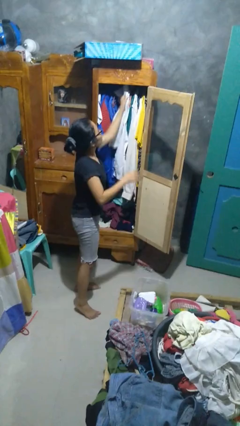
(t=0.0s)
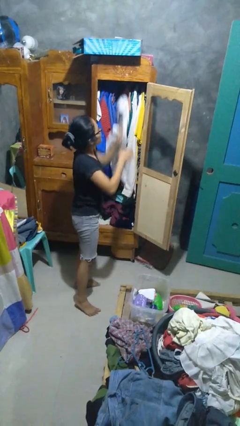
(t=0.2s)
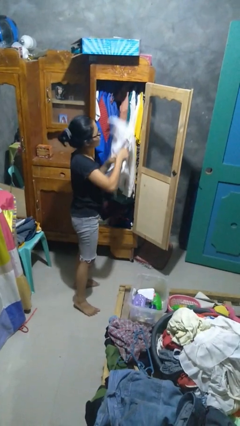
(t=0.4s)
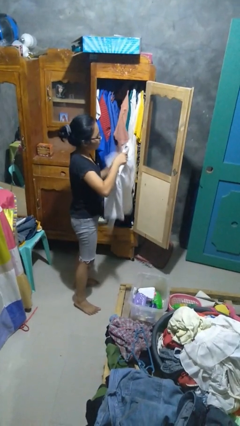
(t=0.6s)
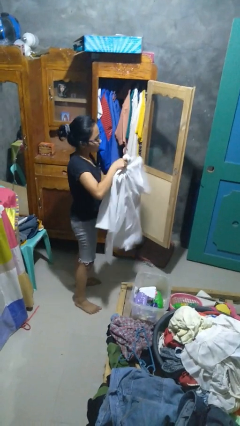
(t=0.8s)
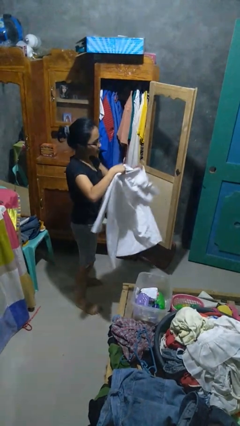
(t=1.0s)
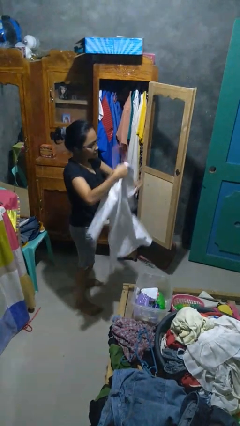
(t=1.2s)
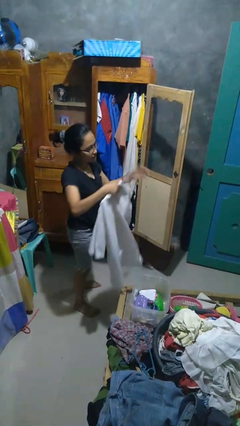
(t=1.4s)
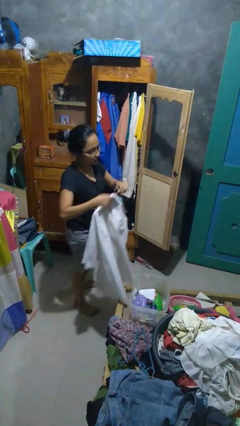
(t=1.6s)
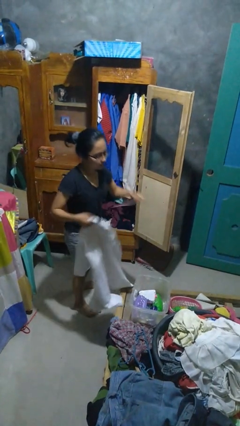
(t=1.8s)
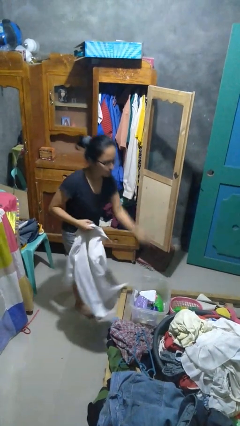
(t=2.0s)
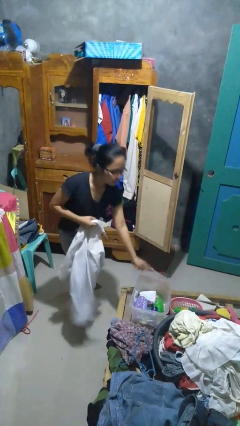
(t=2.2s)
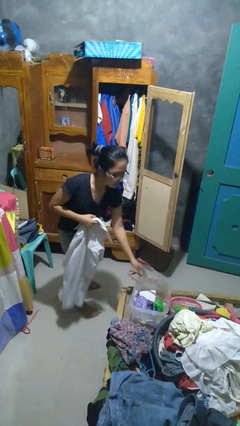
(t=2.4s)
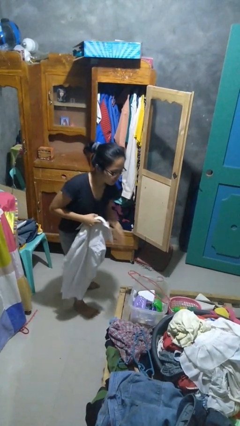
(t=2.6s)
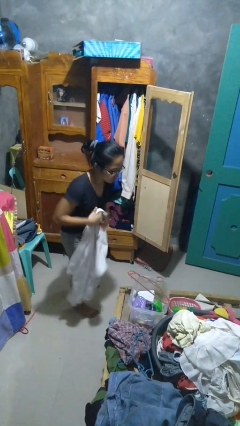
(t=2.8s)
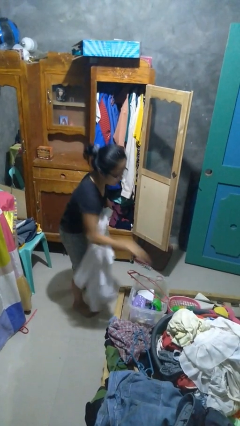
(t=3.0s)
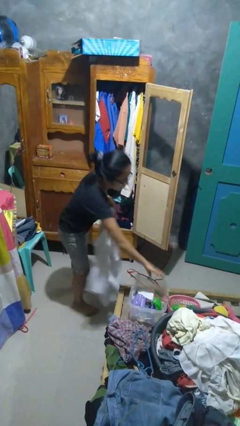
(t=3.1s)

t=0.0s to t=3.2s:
person takes clothes from closet

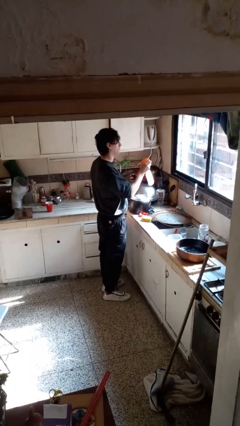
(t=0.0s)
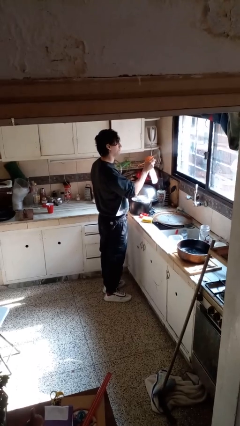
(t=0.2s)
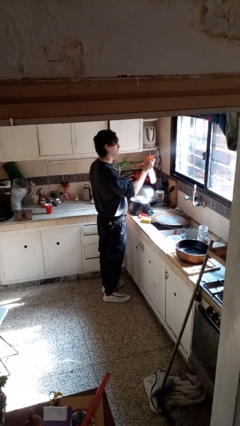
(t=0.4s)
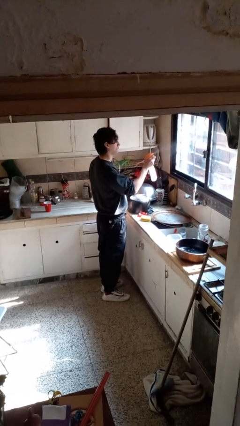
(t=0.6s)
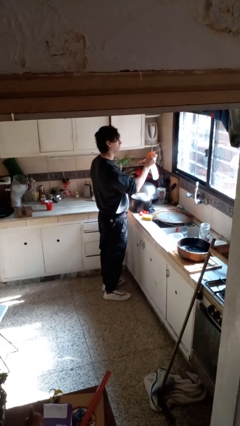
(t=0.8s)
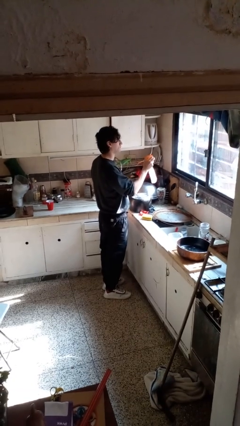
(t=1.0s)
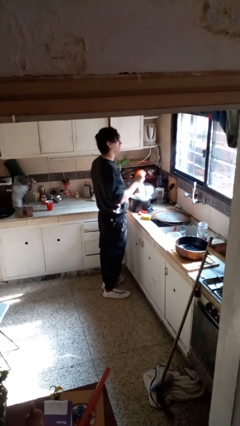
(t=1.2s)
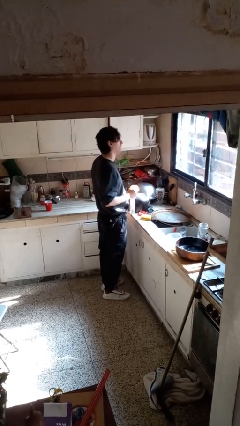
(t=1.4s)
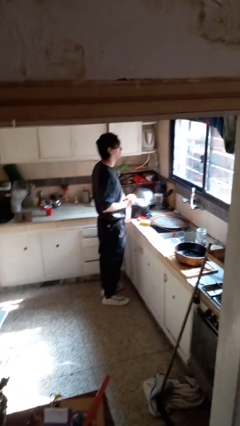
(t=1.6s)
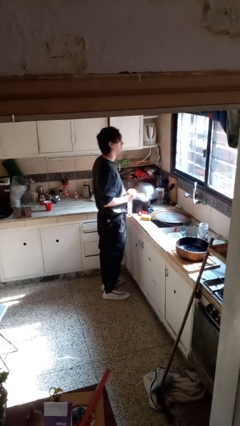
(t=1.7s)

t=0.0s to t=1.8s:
person sprays from bottle

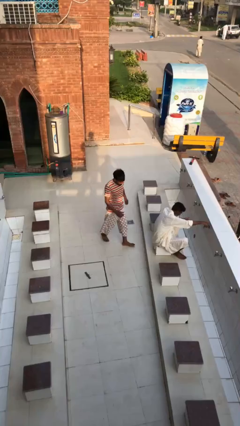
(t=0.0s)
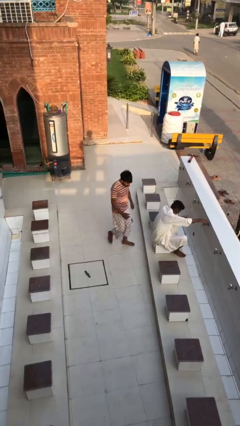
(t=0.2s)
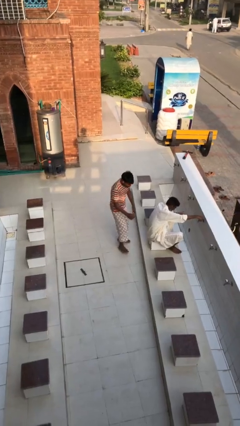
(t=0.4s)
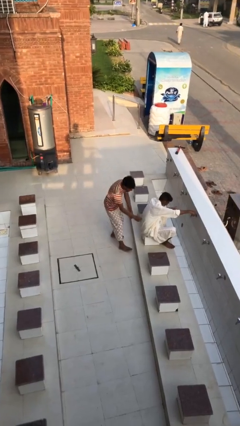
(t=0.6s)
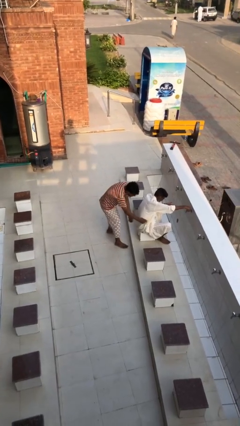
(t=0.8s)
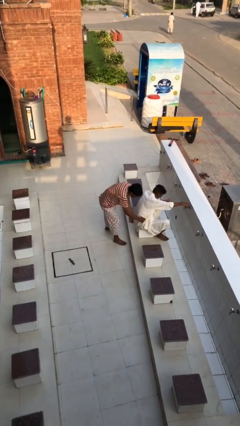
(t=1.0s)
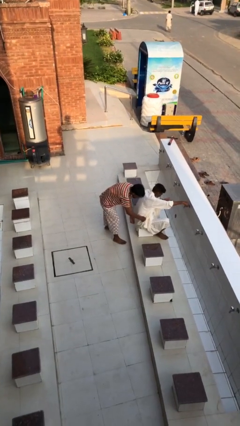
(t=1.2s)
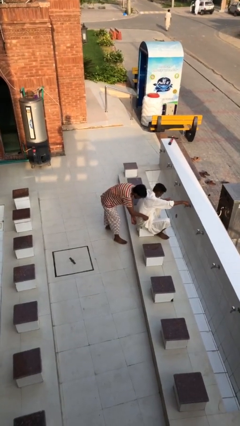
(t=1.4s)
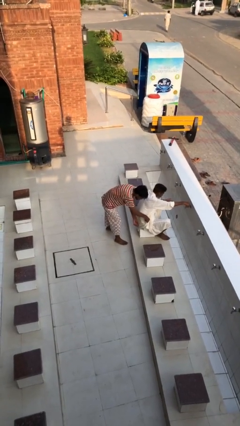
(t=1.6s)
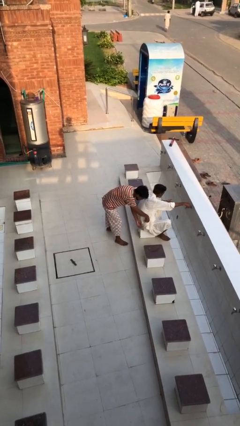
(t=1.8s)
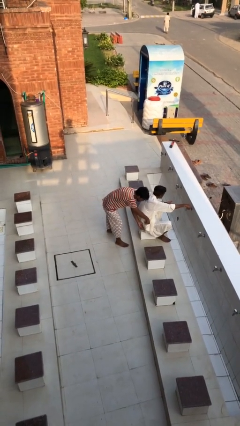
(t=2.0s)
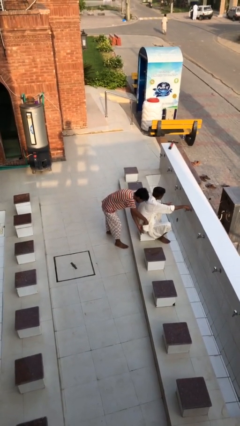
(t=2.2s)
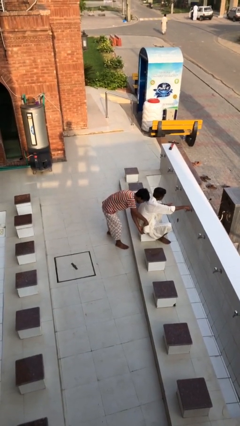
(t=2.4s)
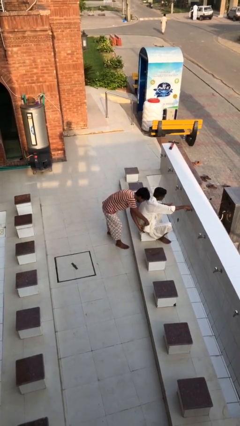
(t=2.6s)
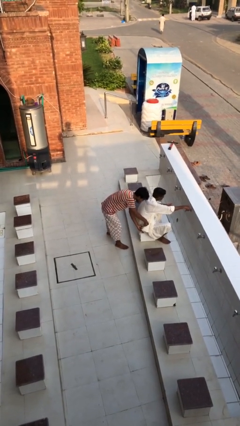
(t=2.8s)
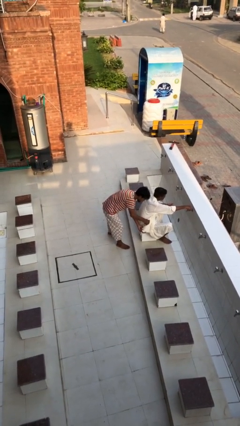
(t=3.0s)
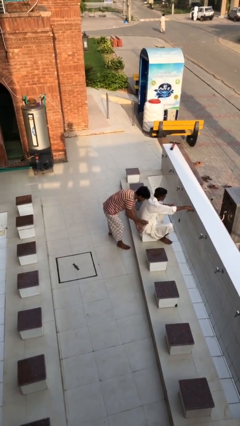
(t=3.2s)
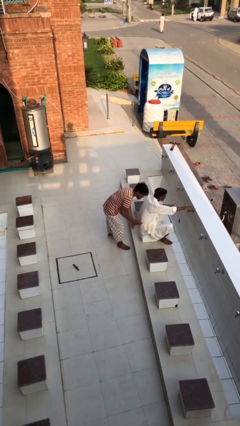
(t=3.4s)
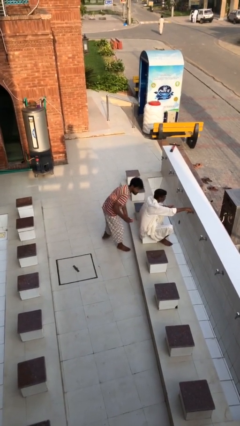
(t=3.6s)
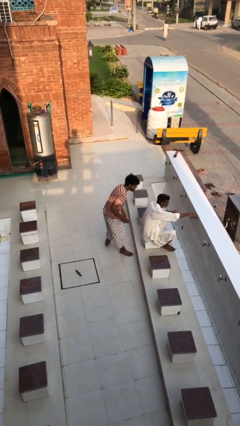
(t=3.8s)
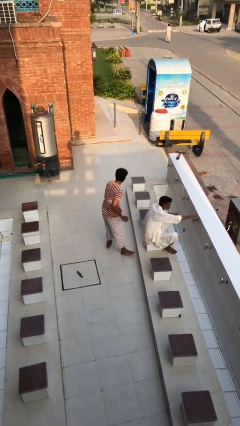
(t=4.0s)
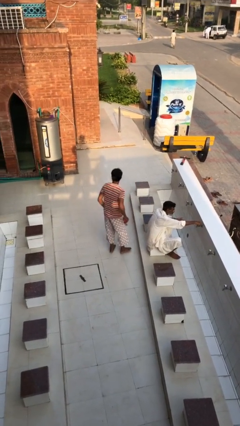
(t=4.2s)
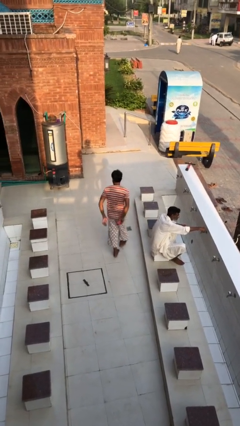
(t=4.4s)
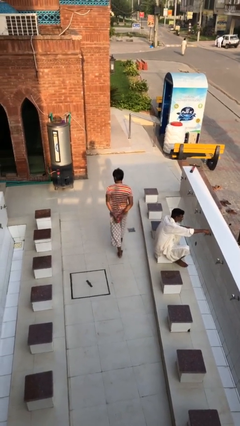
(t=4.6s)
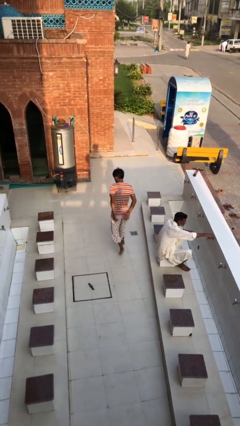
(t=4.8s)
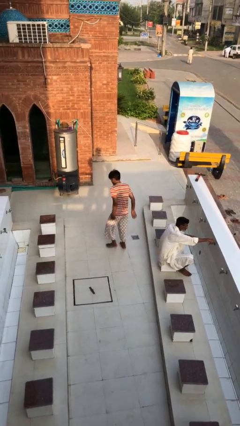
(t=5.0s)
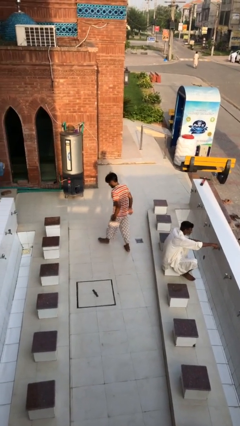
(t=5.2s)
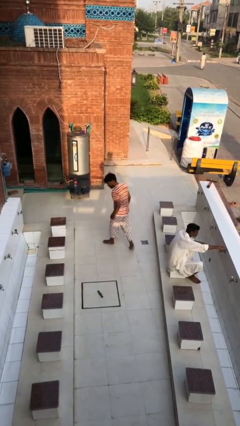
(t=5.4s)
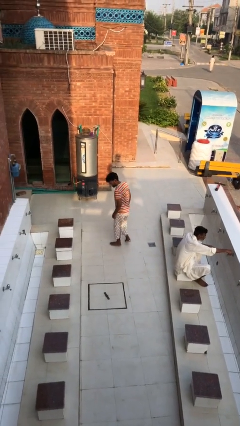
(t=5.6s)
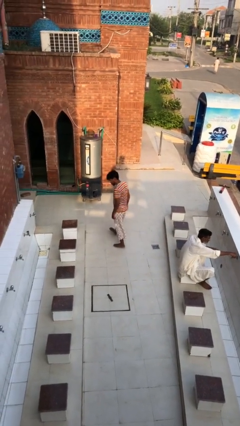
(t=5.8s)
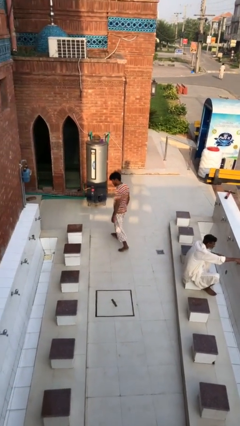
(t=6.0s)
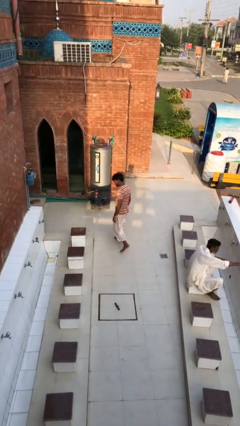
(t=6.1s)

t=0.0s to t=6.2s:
person steals object from person

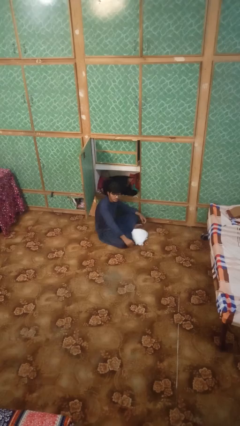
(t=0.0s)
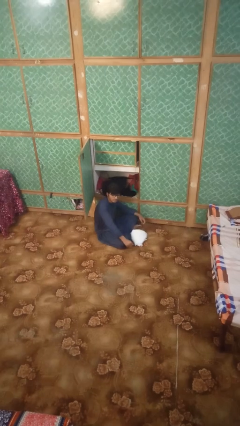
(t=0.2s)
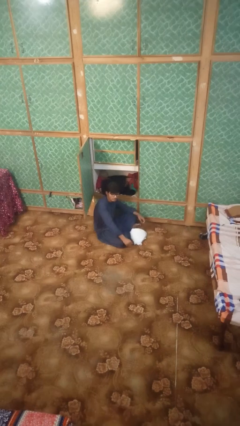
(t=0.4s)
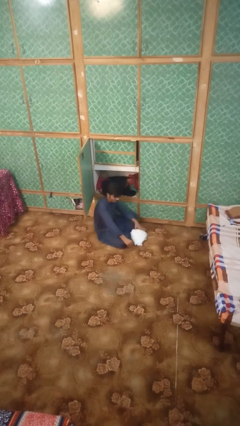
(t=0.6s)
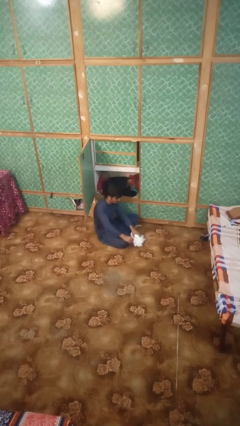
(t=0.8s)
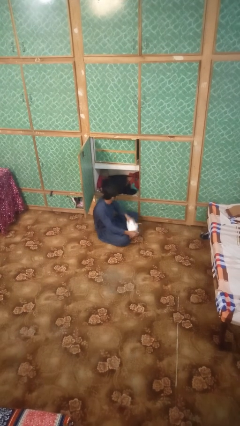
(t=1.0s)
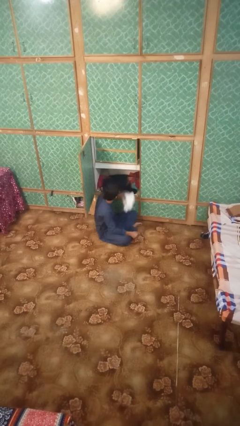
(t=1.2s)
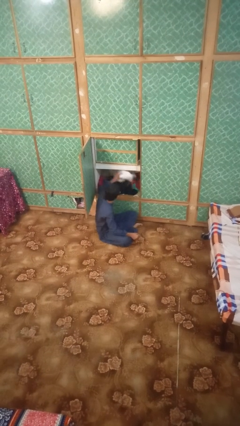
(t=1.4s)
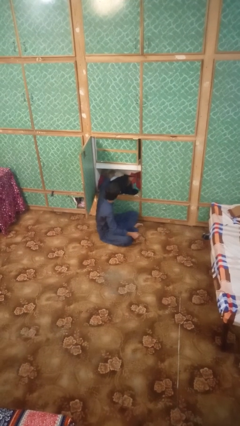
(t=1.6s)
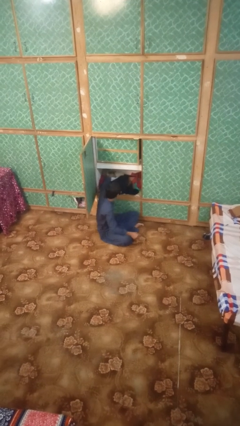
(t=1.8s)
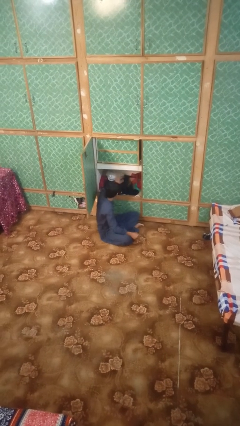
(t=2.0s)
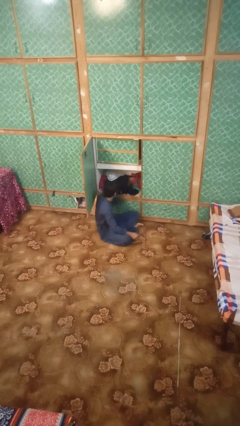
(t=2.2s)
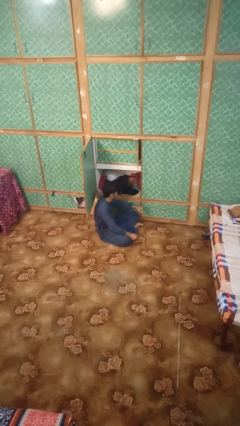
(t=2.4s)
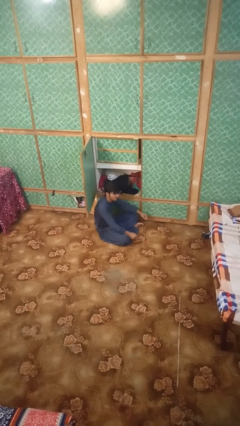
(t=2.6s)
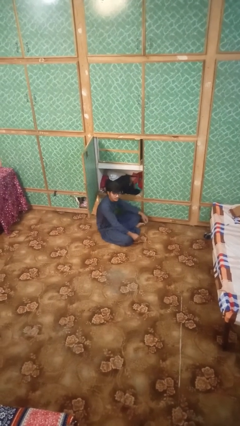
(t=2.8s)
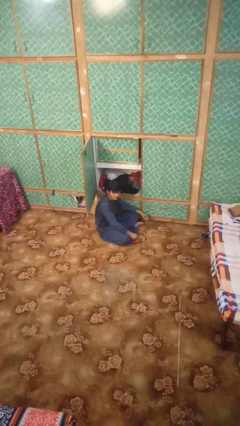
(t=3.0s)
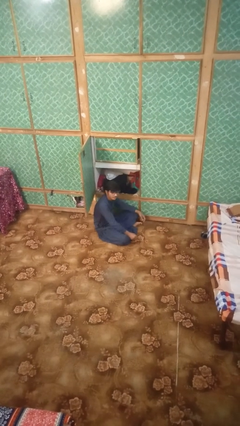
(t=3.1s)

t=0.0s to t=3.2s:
person puts clothes into dresser

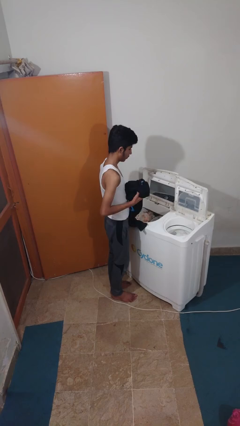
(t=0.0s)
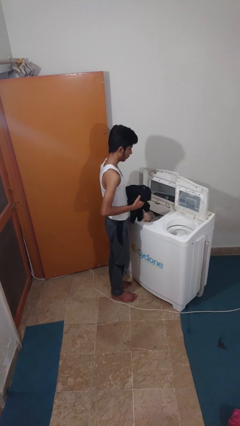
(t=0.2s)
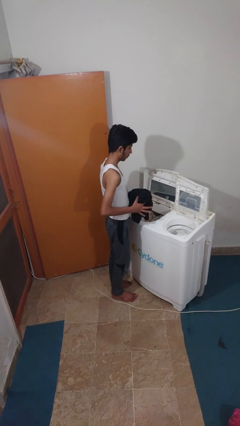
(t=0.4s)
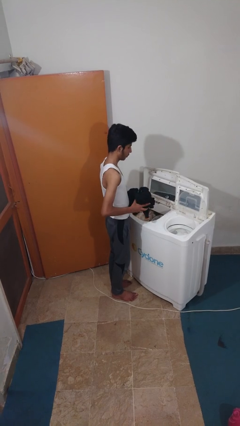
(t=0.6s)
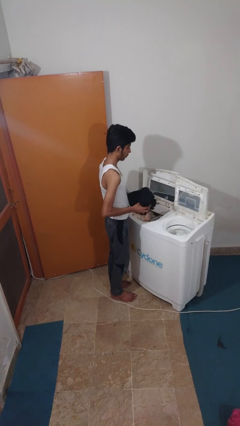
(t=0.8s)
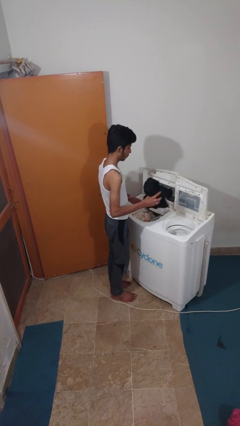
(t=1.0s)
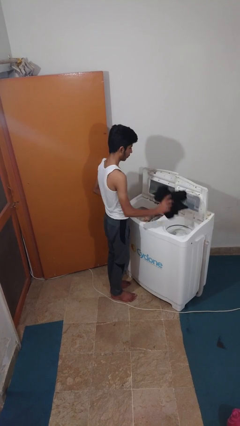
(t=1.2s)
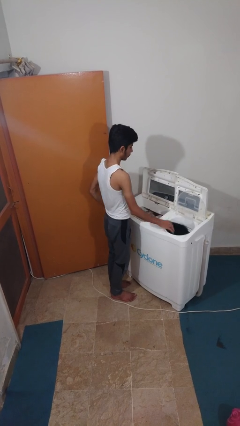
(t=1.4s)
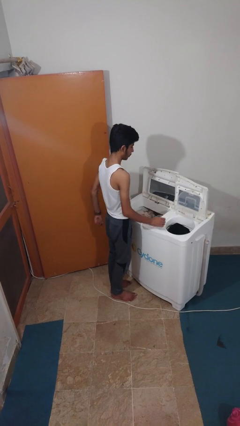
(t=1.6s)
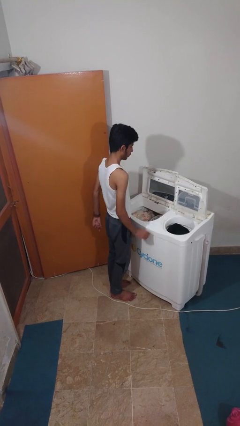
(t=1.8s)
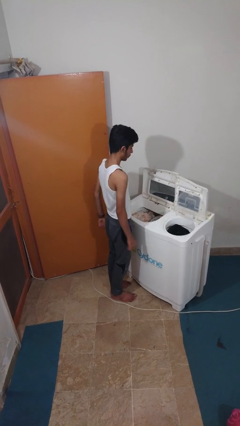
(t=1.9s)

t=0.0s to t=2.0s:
person loads dryer

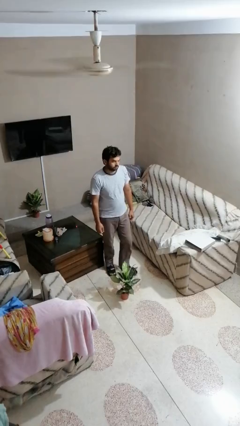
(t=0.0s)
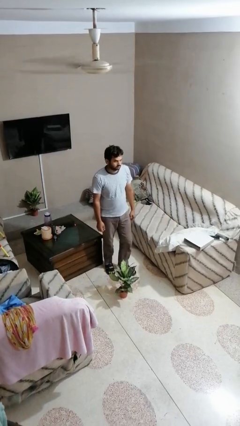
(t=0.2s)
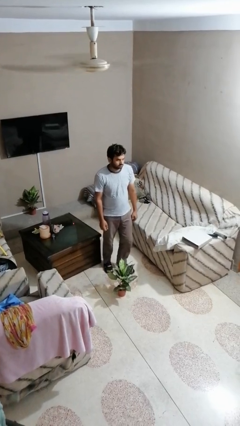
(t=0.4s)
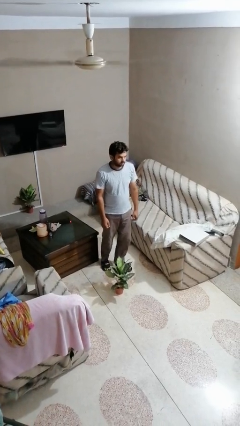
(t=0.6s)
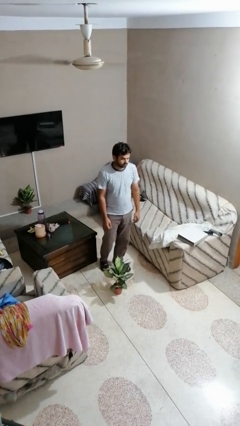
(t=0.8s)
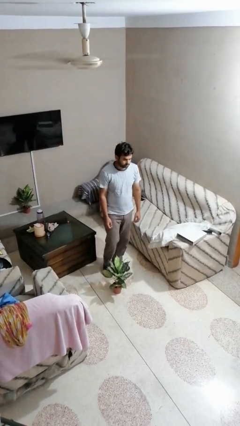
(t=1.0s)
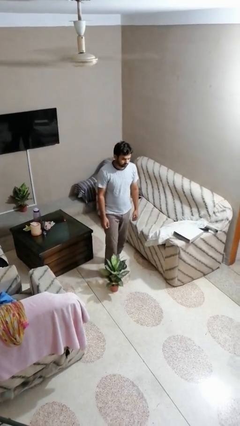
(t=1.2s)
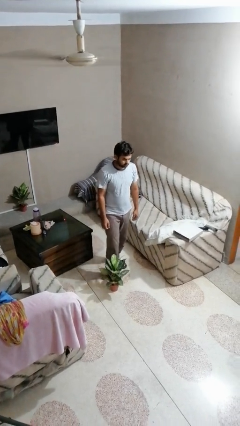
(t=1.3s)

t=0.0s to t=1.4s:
person trips on object on floor
